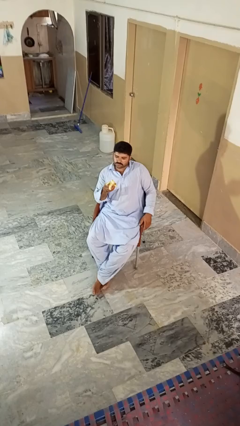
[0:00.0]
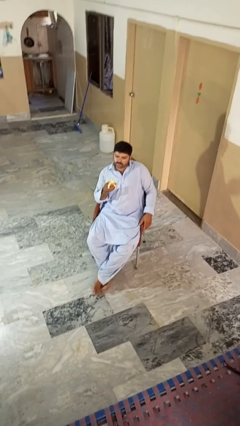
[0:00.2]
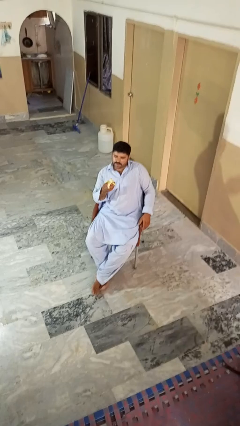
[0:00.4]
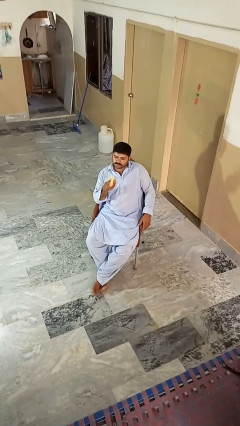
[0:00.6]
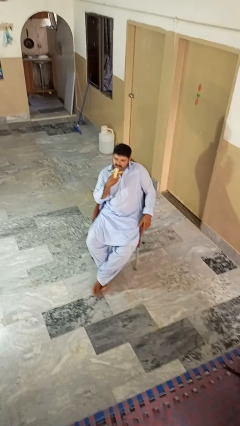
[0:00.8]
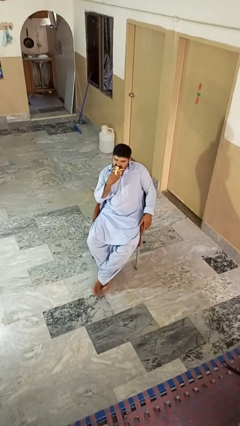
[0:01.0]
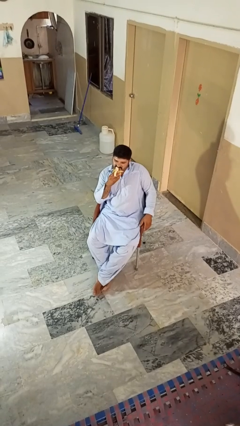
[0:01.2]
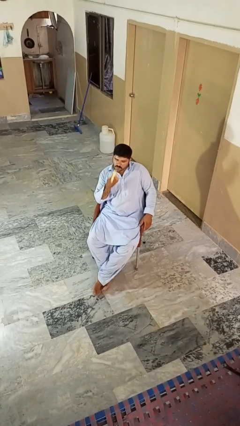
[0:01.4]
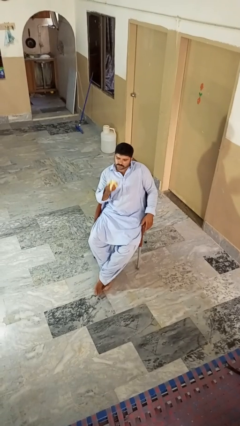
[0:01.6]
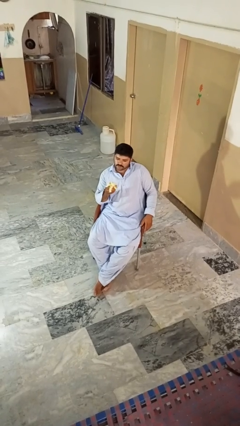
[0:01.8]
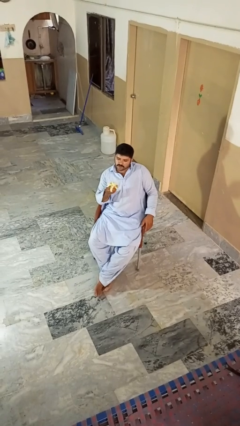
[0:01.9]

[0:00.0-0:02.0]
person eats banana

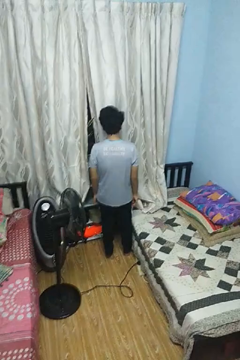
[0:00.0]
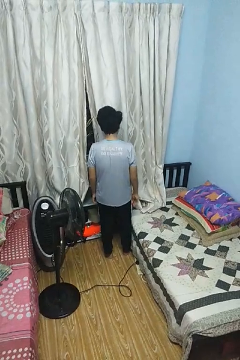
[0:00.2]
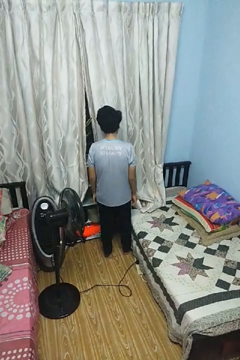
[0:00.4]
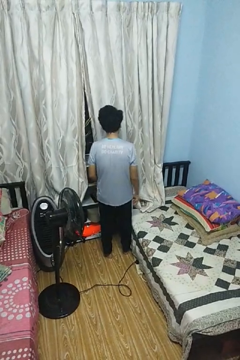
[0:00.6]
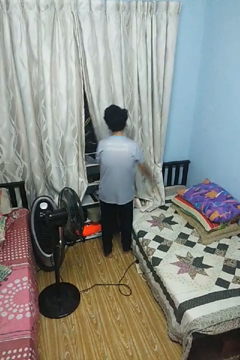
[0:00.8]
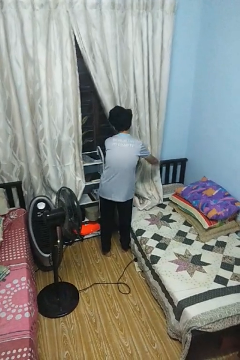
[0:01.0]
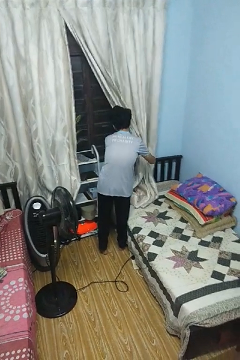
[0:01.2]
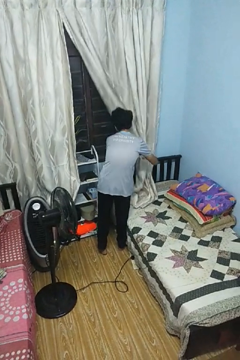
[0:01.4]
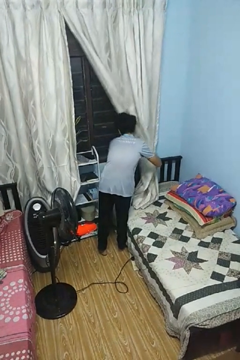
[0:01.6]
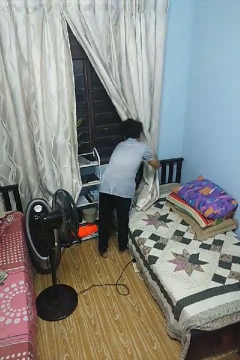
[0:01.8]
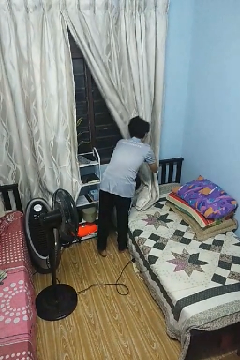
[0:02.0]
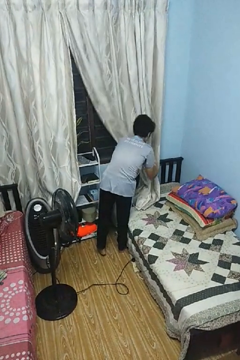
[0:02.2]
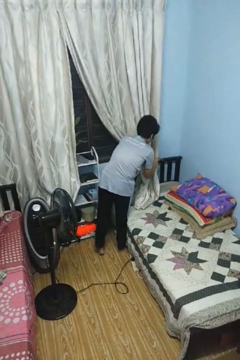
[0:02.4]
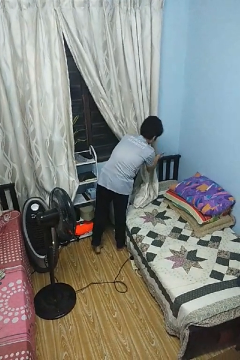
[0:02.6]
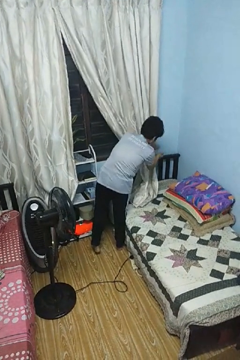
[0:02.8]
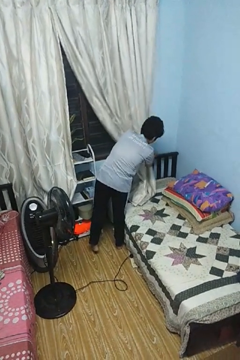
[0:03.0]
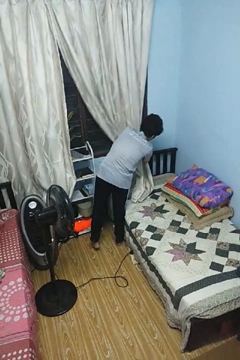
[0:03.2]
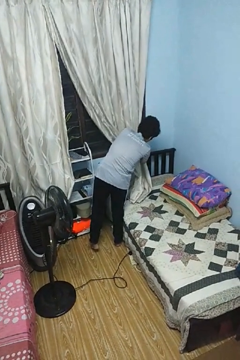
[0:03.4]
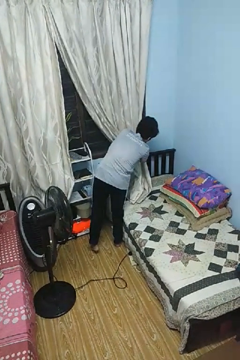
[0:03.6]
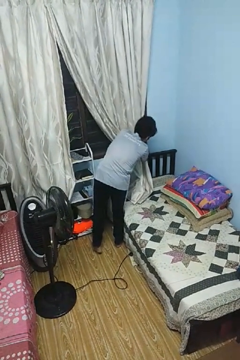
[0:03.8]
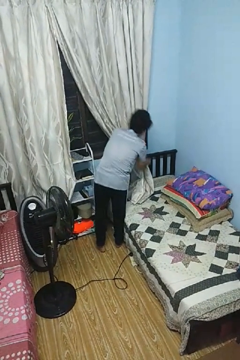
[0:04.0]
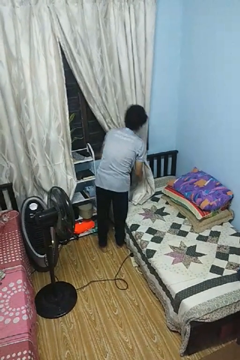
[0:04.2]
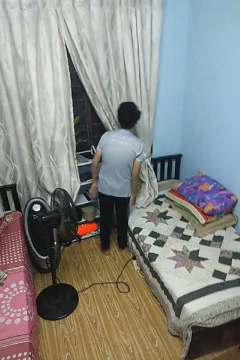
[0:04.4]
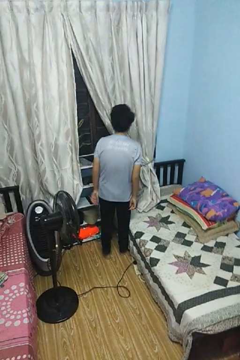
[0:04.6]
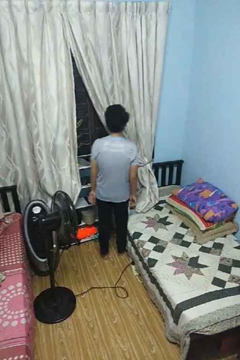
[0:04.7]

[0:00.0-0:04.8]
person opens curtains

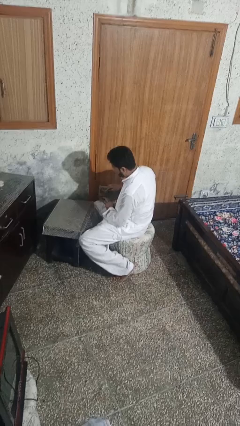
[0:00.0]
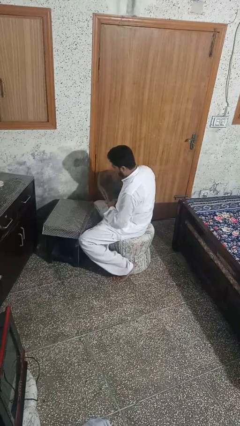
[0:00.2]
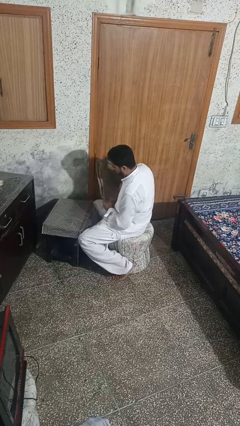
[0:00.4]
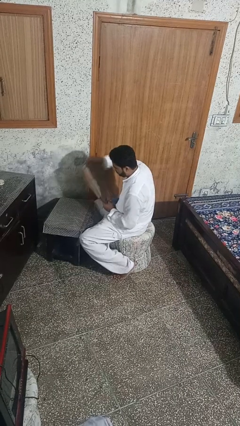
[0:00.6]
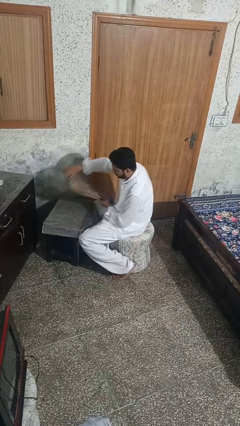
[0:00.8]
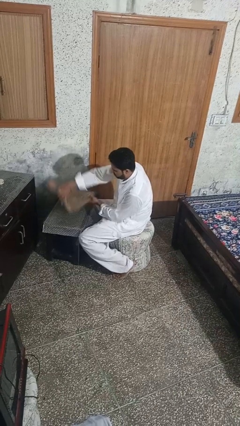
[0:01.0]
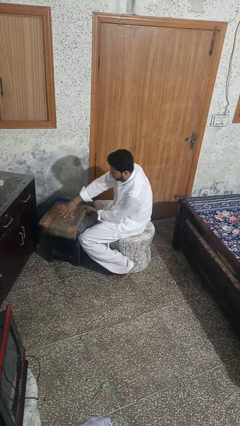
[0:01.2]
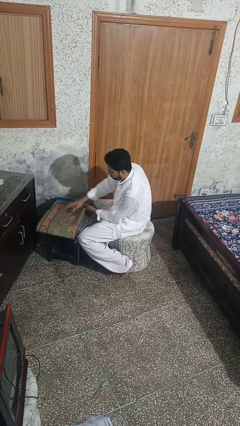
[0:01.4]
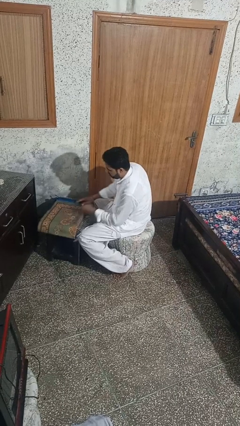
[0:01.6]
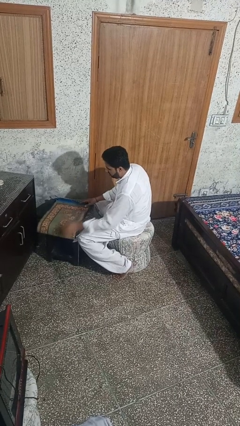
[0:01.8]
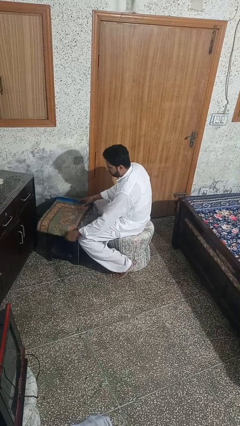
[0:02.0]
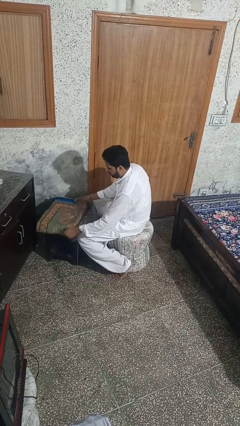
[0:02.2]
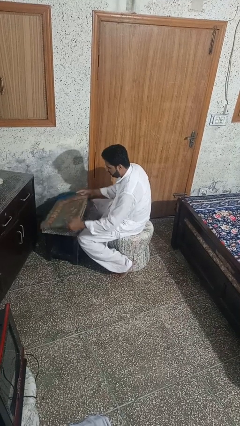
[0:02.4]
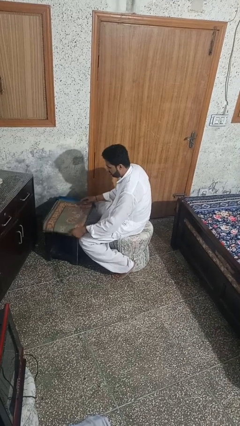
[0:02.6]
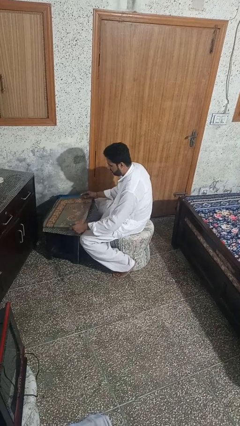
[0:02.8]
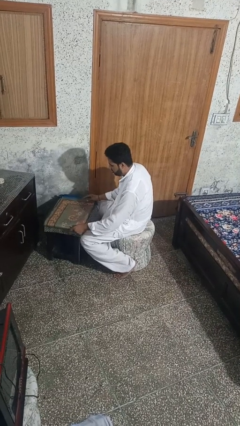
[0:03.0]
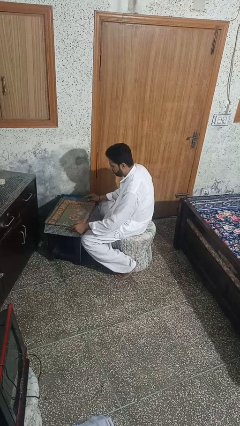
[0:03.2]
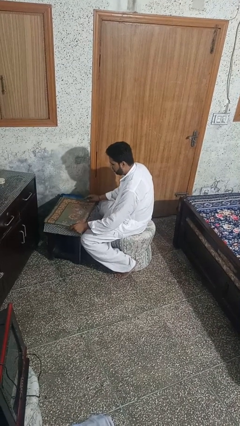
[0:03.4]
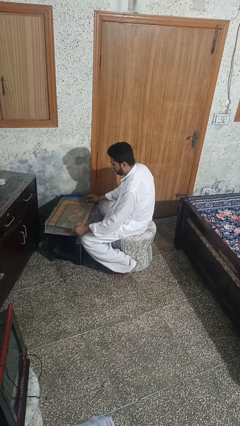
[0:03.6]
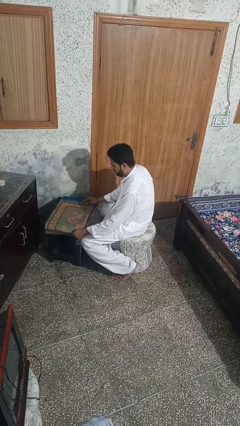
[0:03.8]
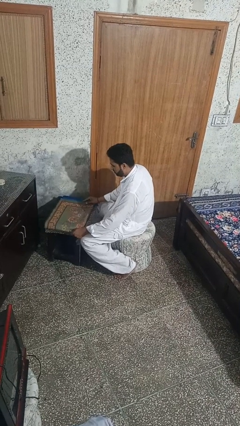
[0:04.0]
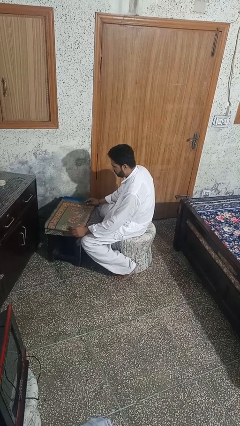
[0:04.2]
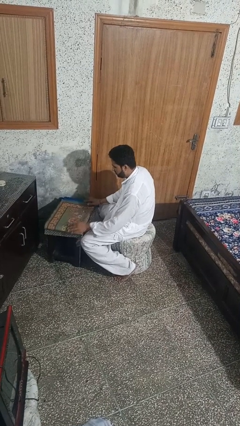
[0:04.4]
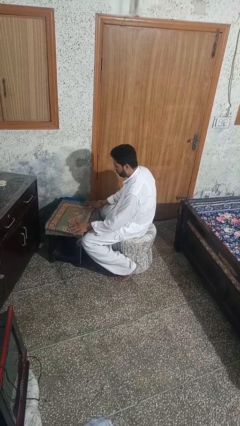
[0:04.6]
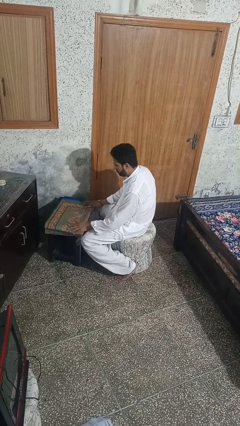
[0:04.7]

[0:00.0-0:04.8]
person spreads tablecloth

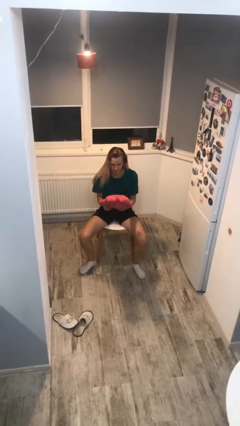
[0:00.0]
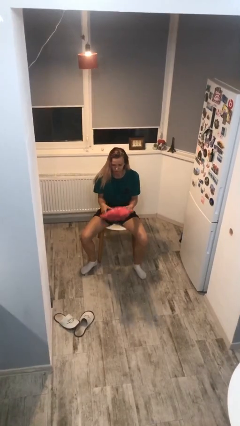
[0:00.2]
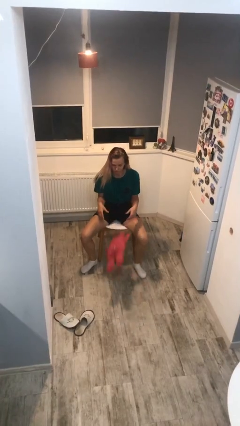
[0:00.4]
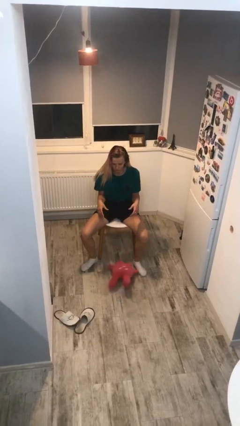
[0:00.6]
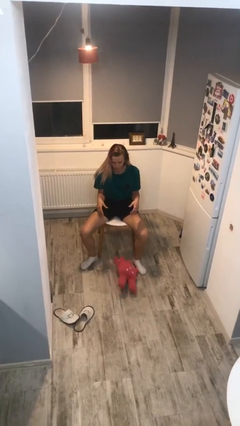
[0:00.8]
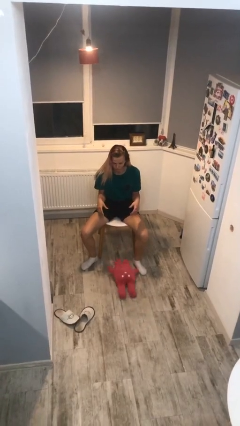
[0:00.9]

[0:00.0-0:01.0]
person drops object

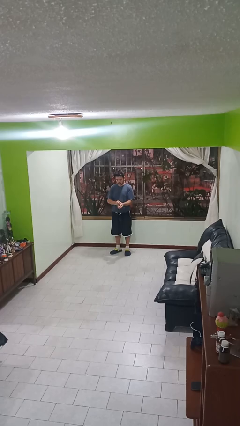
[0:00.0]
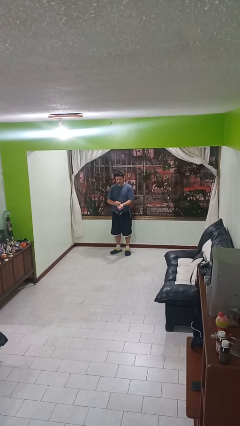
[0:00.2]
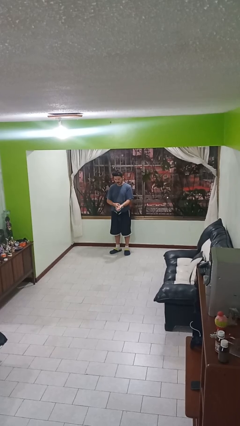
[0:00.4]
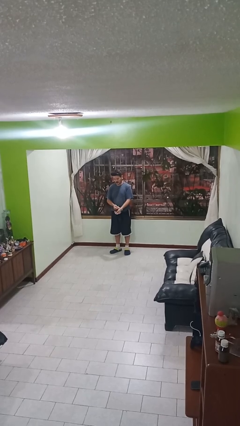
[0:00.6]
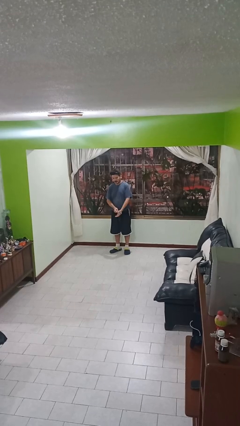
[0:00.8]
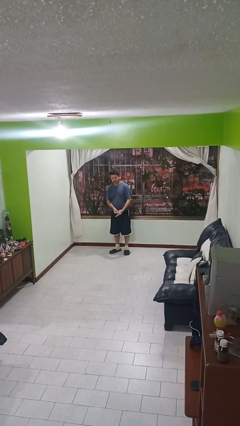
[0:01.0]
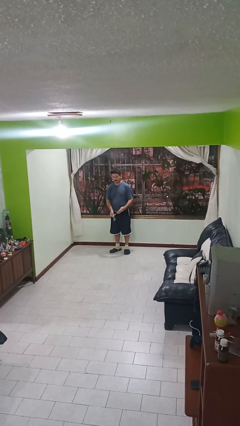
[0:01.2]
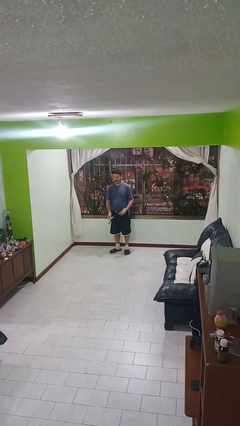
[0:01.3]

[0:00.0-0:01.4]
person takes off wristwatch

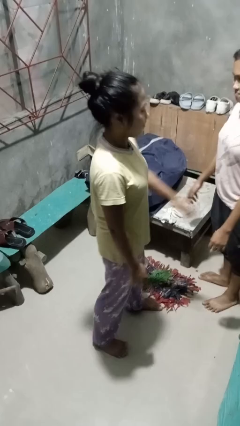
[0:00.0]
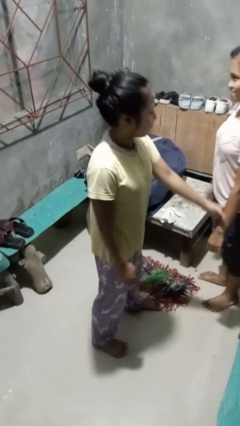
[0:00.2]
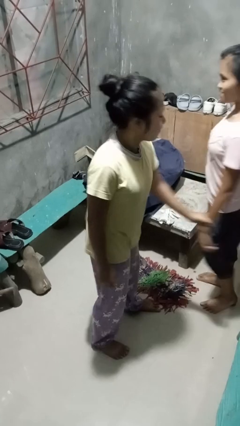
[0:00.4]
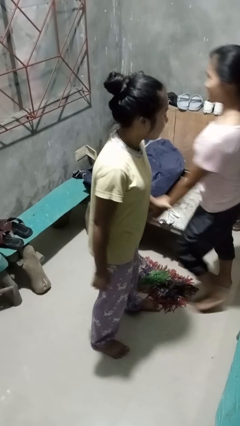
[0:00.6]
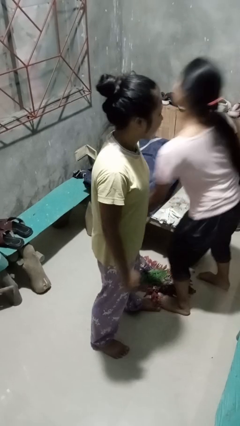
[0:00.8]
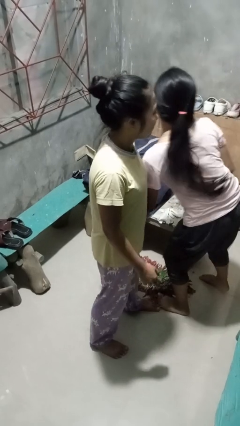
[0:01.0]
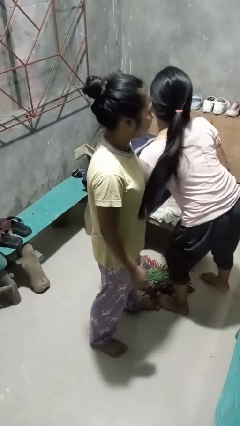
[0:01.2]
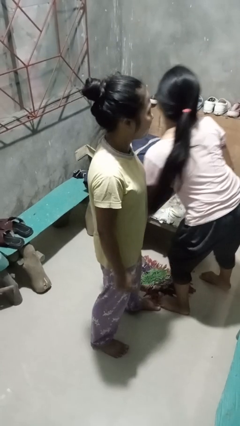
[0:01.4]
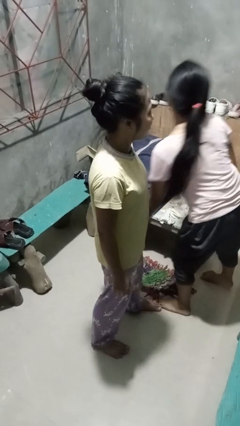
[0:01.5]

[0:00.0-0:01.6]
person grabs person by forearm

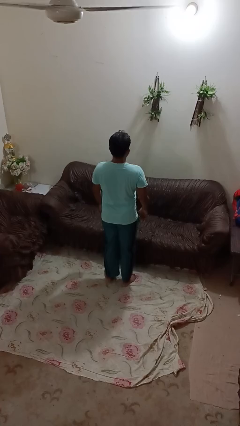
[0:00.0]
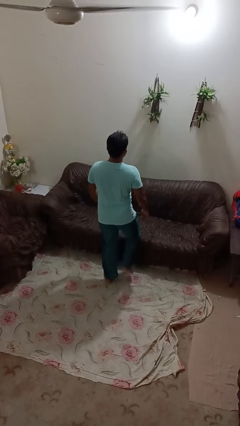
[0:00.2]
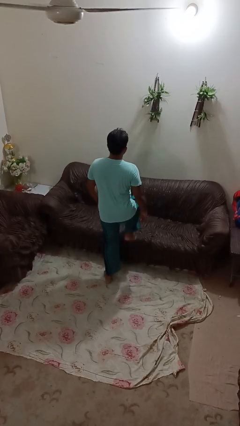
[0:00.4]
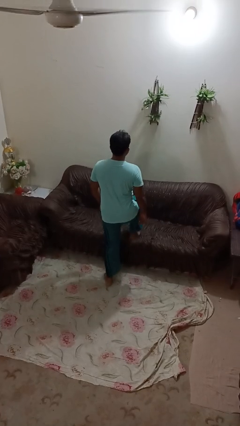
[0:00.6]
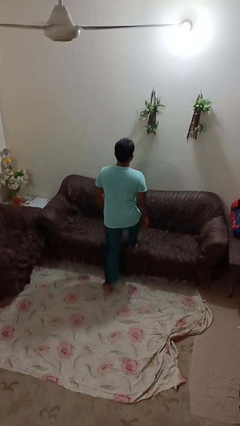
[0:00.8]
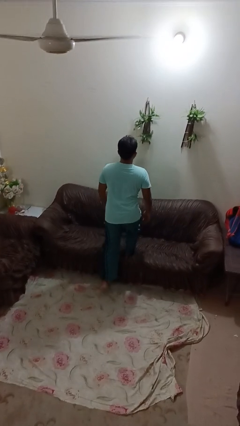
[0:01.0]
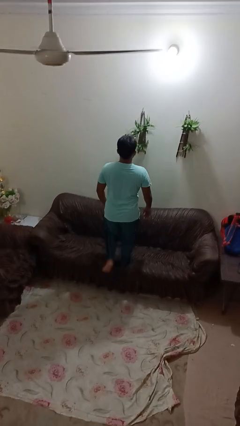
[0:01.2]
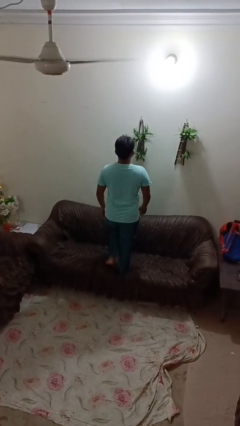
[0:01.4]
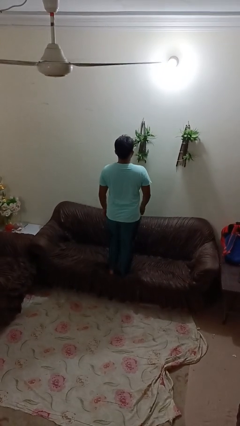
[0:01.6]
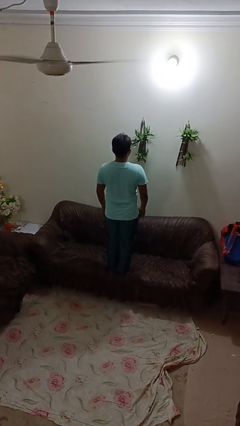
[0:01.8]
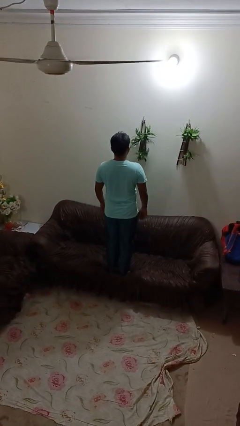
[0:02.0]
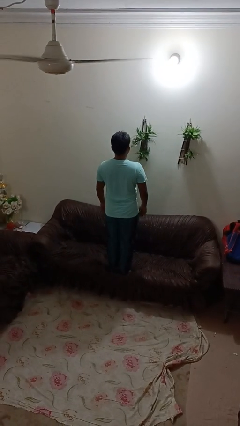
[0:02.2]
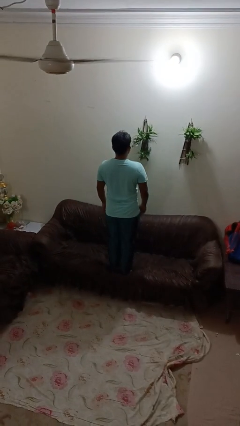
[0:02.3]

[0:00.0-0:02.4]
person climbs on couch

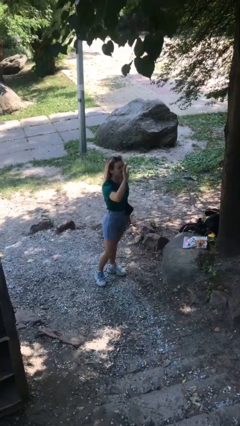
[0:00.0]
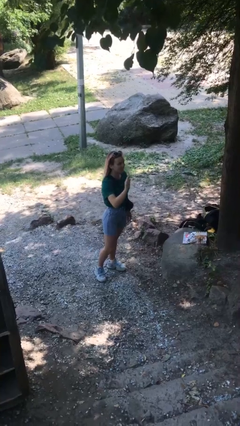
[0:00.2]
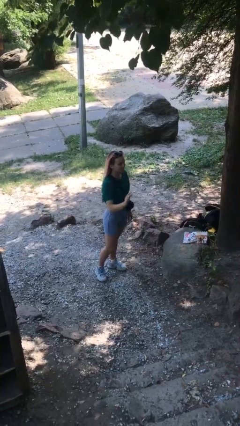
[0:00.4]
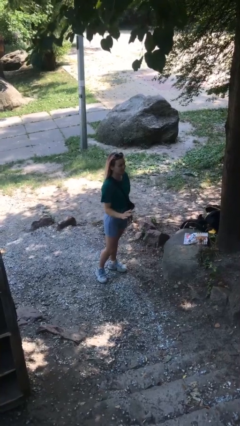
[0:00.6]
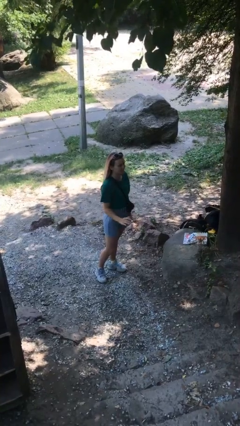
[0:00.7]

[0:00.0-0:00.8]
person gestures lower hand
